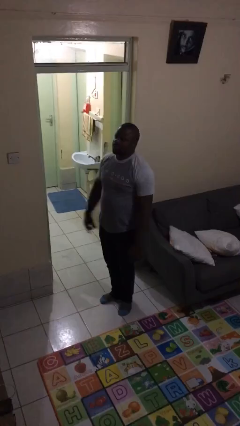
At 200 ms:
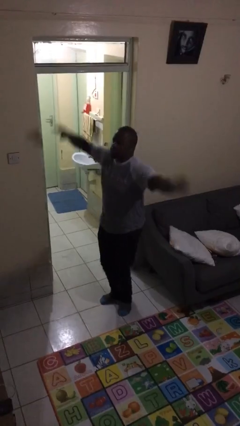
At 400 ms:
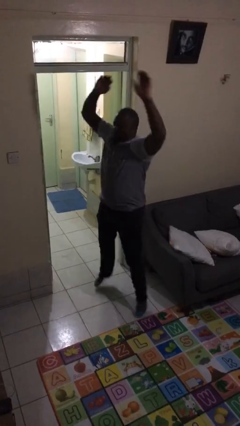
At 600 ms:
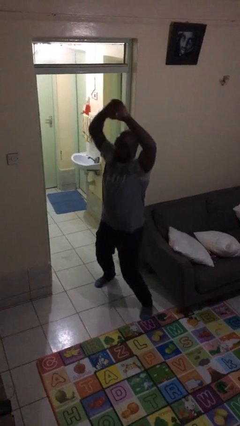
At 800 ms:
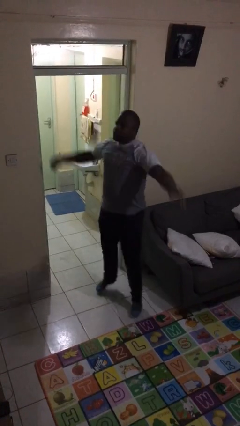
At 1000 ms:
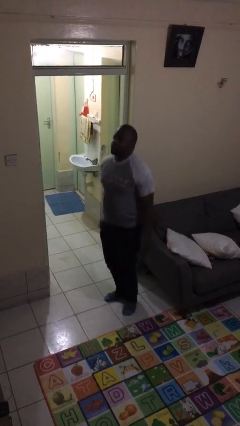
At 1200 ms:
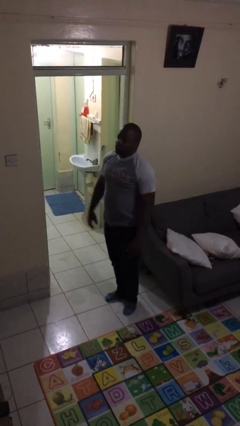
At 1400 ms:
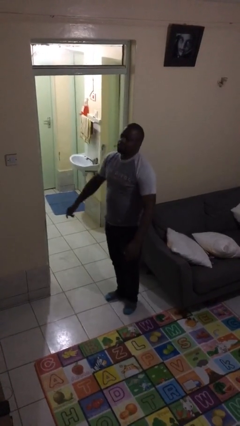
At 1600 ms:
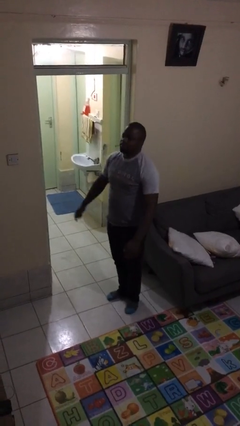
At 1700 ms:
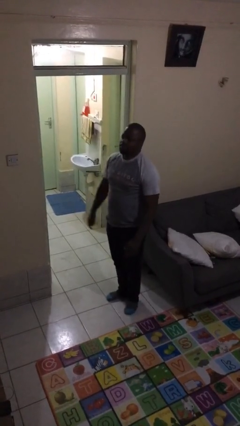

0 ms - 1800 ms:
person exercises with jumping jacks

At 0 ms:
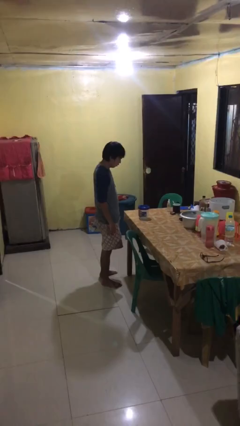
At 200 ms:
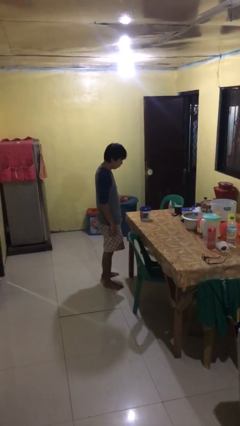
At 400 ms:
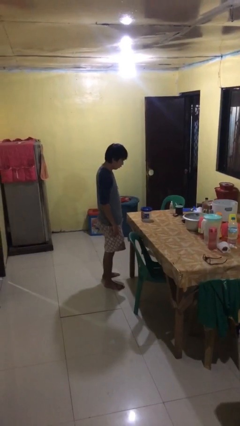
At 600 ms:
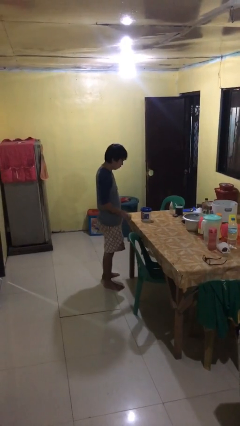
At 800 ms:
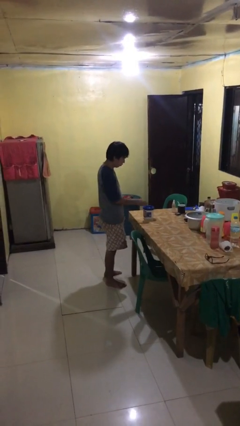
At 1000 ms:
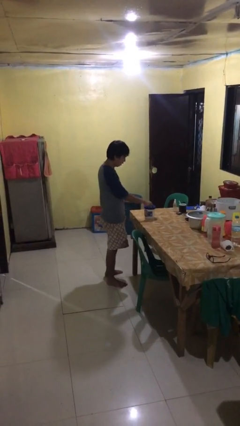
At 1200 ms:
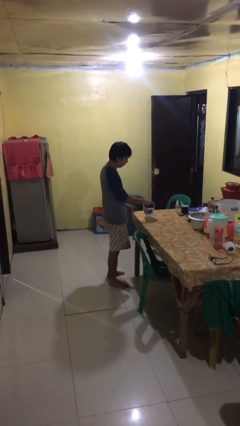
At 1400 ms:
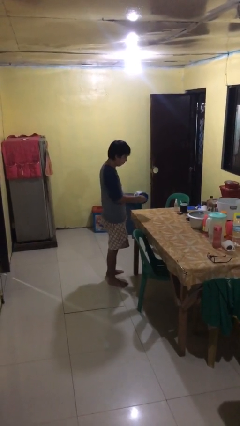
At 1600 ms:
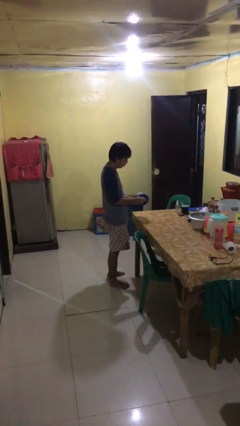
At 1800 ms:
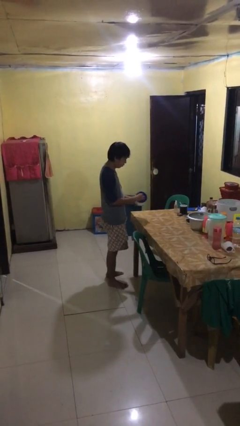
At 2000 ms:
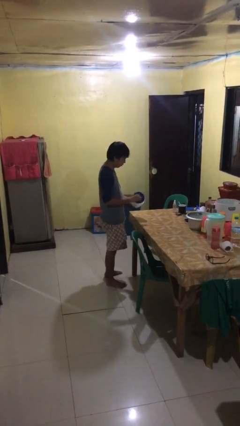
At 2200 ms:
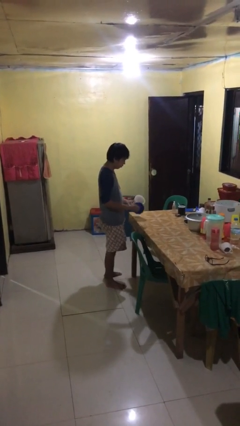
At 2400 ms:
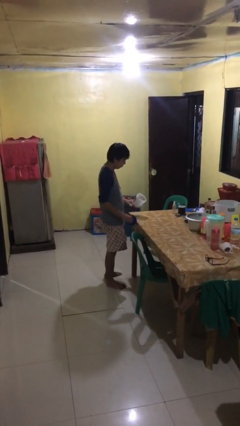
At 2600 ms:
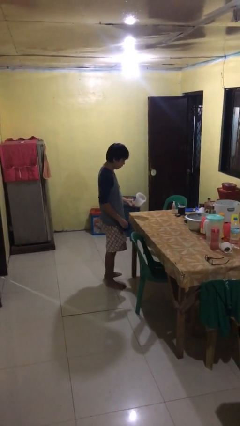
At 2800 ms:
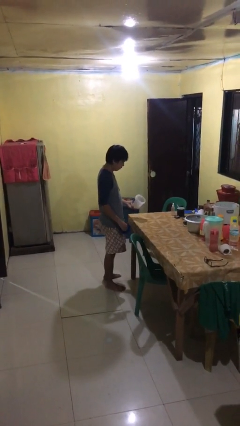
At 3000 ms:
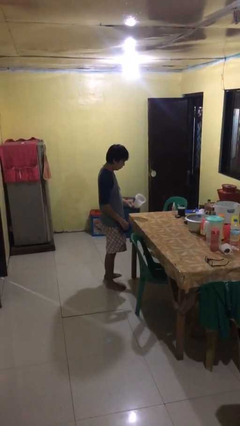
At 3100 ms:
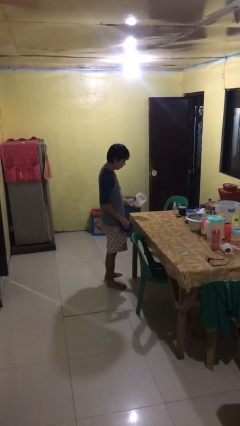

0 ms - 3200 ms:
person opens jar

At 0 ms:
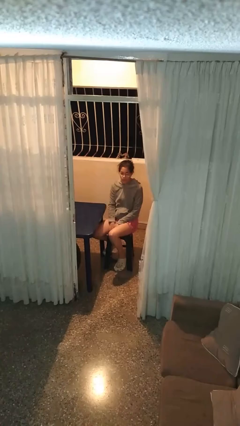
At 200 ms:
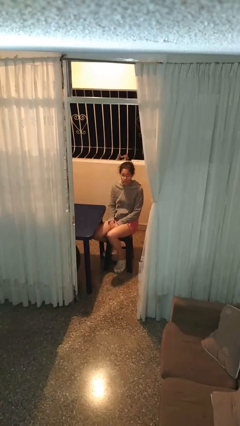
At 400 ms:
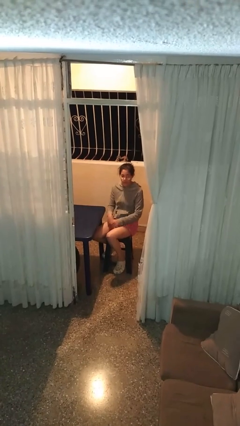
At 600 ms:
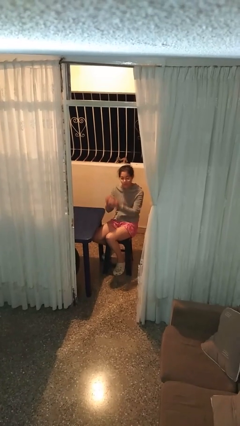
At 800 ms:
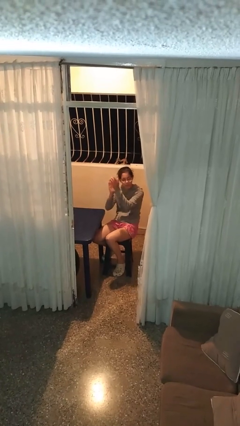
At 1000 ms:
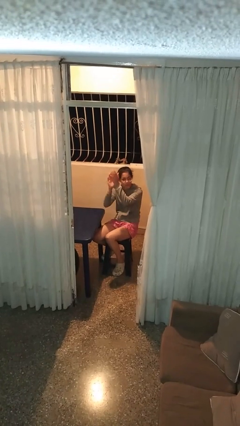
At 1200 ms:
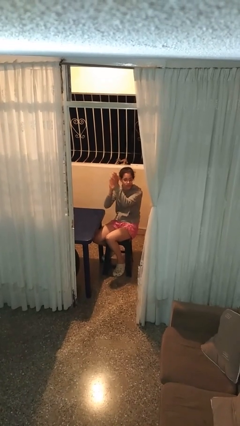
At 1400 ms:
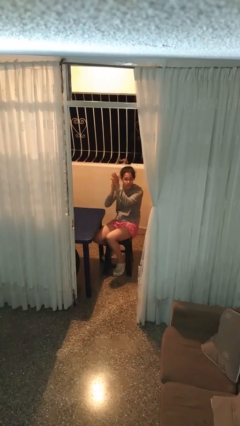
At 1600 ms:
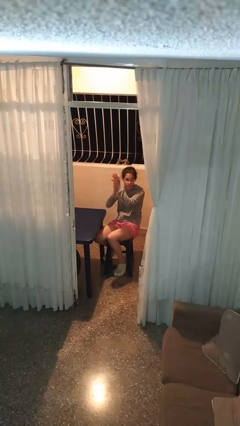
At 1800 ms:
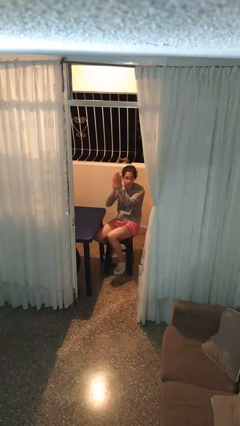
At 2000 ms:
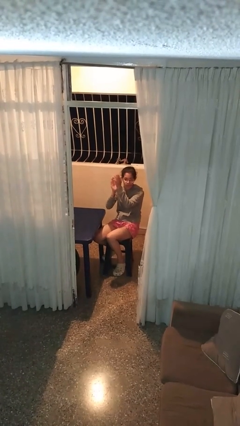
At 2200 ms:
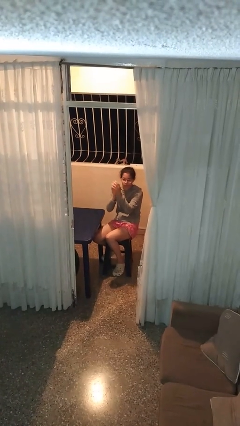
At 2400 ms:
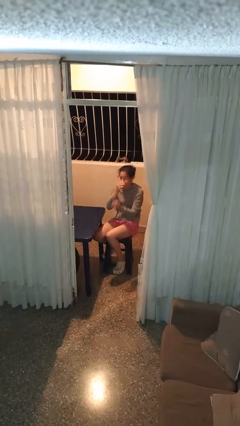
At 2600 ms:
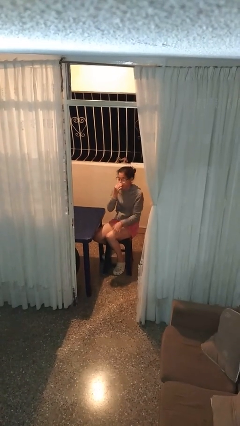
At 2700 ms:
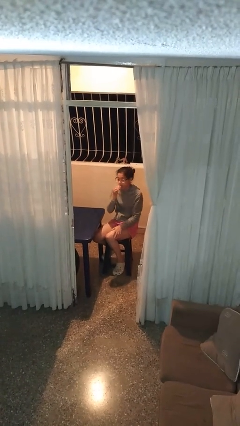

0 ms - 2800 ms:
person claps hands

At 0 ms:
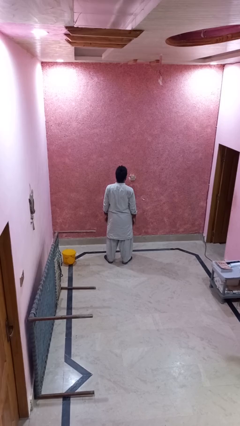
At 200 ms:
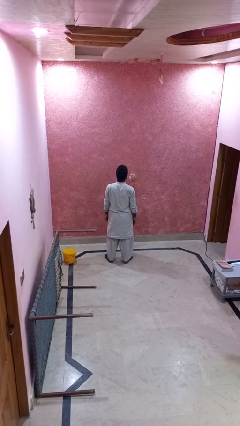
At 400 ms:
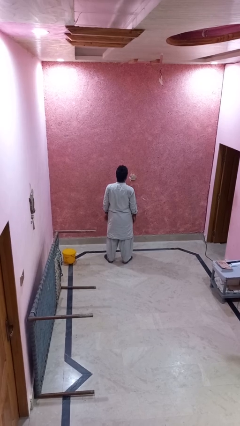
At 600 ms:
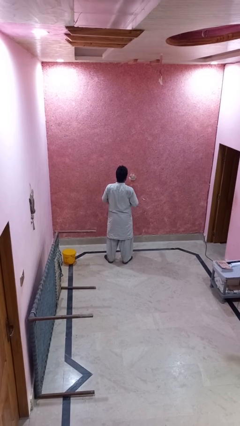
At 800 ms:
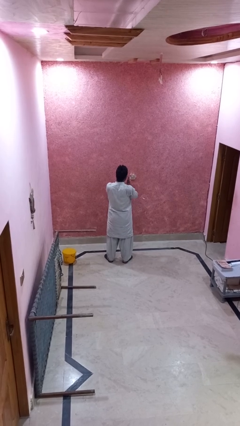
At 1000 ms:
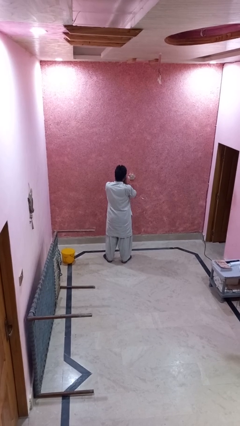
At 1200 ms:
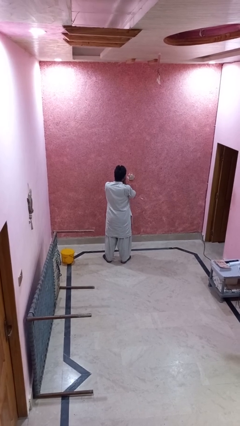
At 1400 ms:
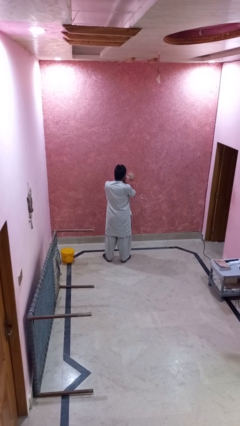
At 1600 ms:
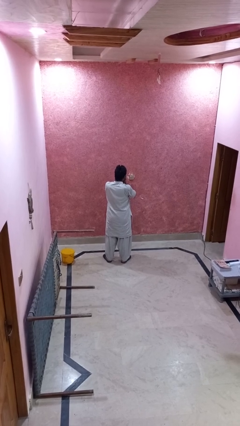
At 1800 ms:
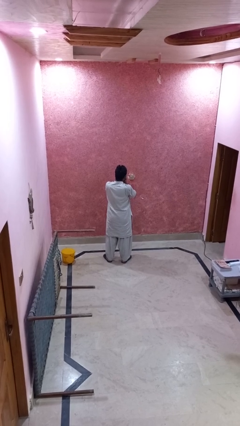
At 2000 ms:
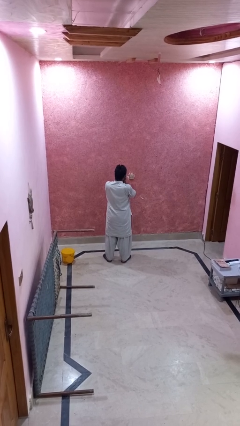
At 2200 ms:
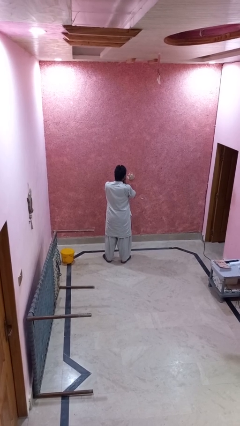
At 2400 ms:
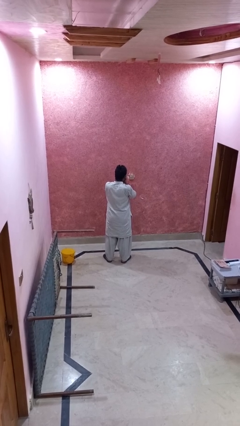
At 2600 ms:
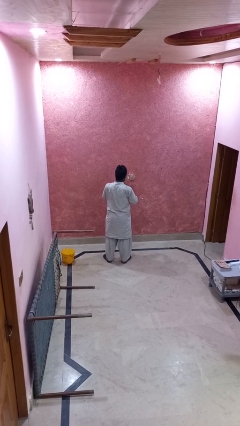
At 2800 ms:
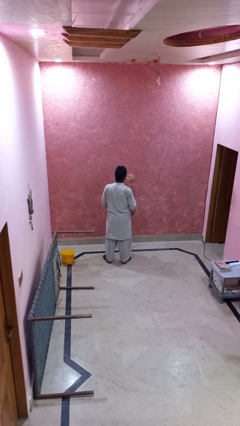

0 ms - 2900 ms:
person sneezes into hand

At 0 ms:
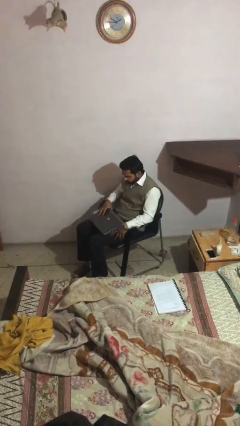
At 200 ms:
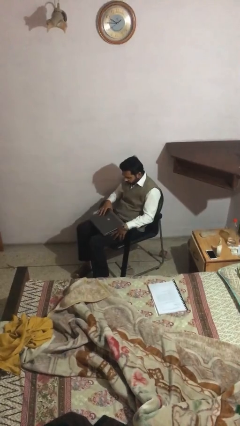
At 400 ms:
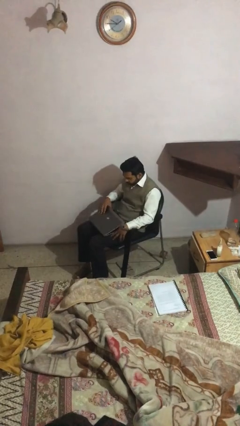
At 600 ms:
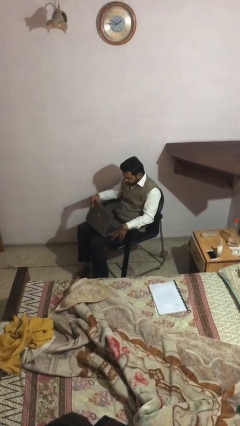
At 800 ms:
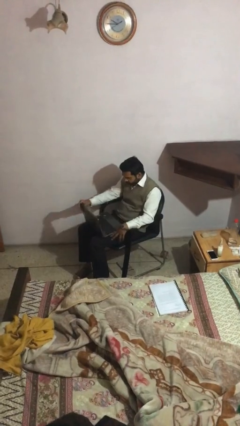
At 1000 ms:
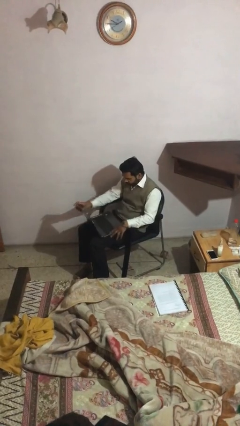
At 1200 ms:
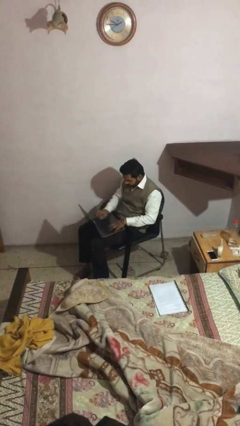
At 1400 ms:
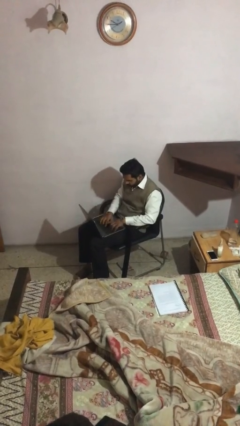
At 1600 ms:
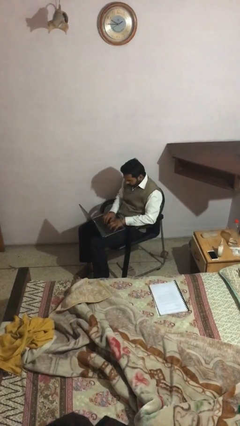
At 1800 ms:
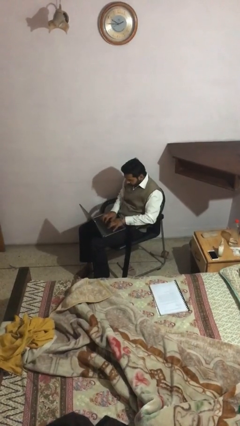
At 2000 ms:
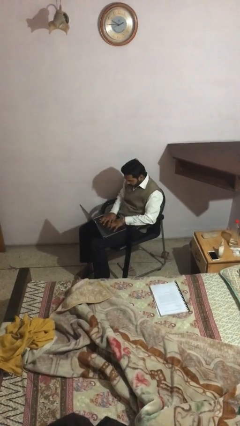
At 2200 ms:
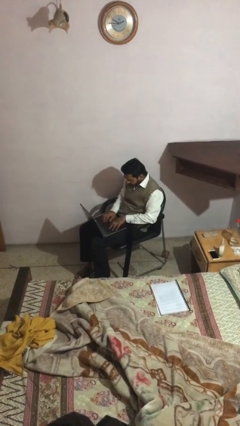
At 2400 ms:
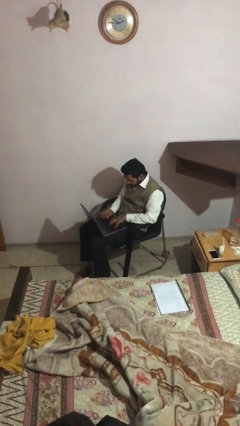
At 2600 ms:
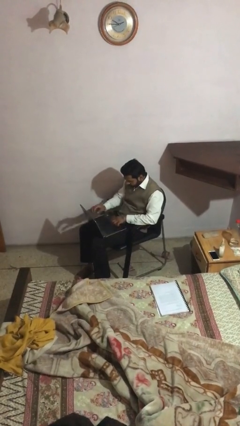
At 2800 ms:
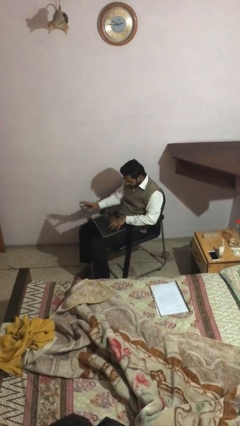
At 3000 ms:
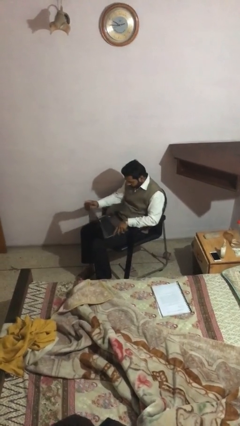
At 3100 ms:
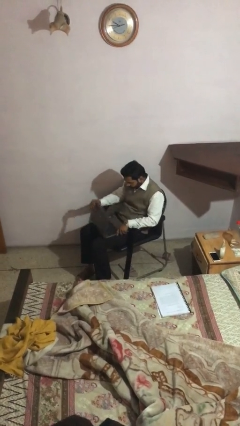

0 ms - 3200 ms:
person interacts with laptop

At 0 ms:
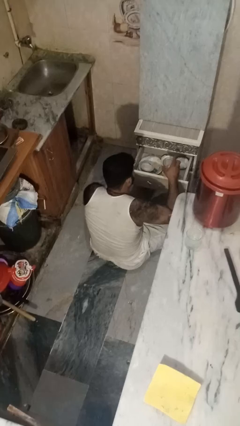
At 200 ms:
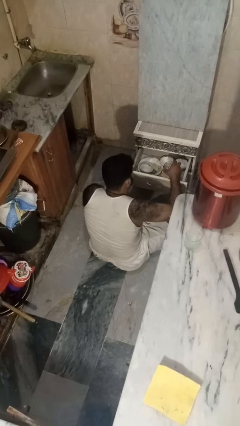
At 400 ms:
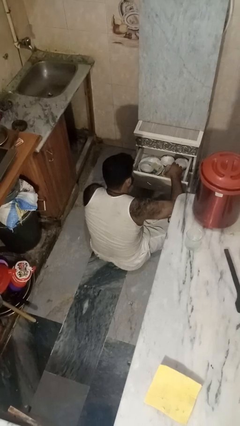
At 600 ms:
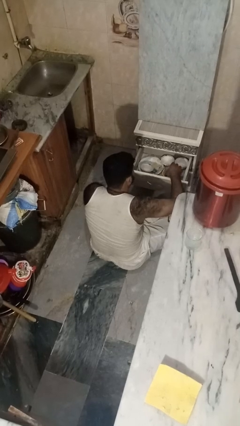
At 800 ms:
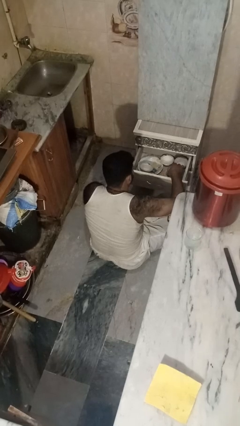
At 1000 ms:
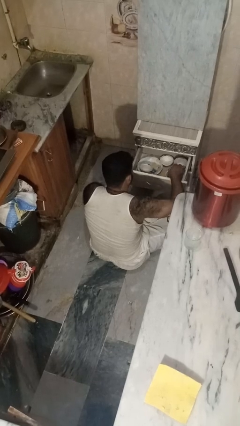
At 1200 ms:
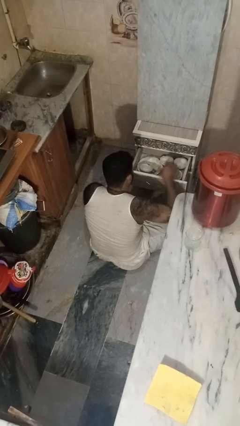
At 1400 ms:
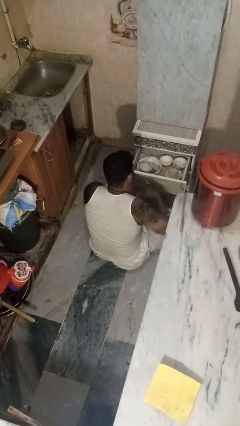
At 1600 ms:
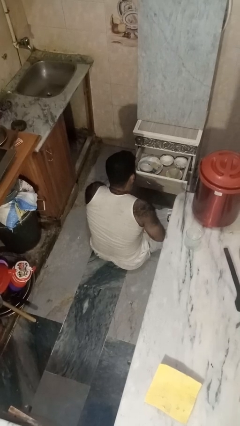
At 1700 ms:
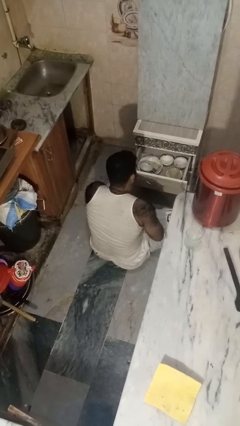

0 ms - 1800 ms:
person puts object into kitchen drawer

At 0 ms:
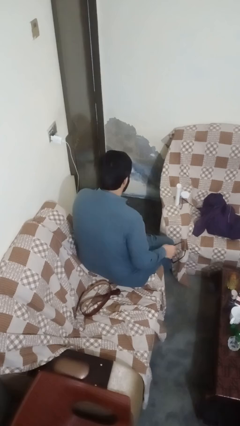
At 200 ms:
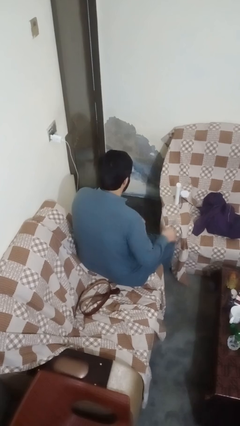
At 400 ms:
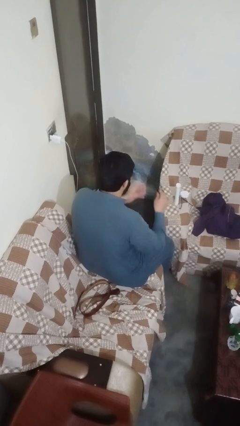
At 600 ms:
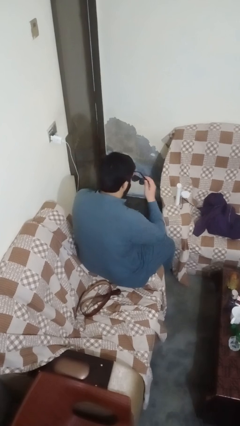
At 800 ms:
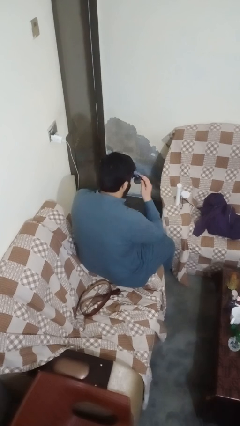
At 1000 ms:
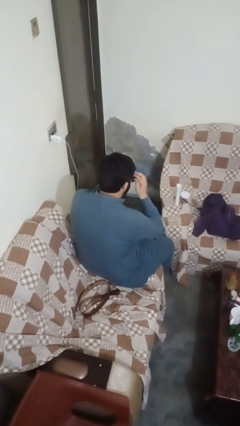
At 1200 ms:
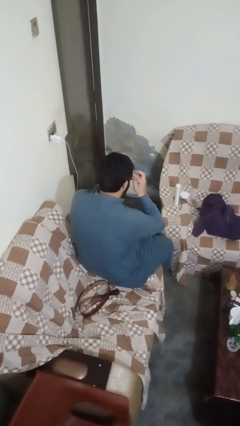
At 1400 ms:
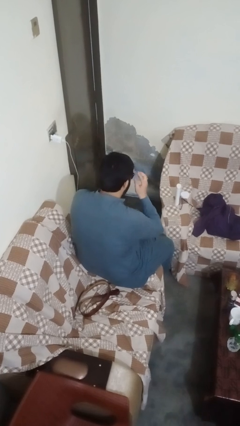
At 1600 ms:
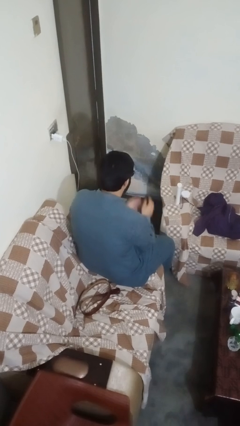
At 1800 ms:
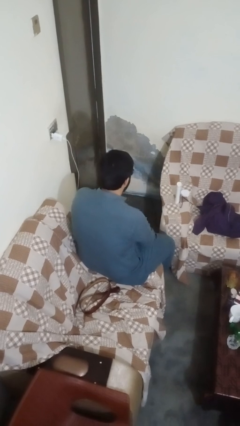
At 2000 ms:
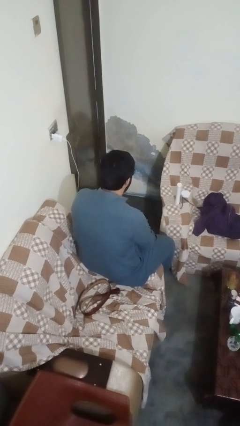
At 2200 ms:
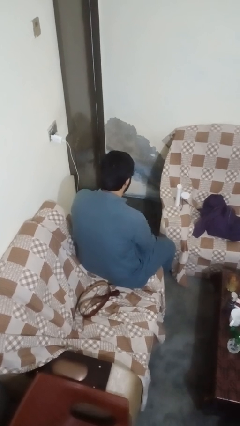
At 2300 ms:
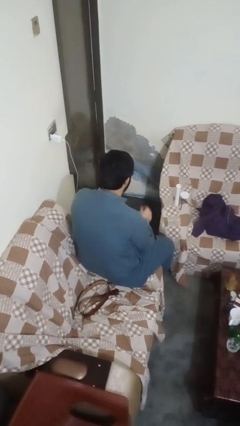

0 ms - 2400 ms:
person puts on sunglasses
